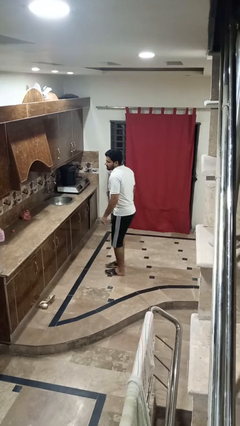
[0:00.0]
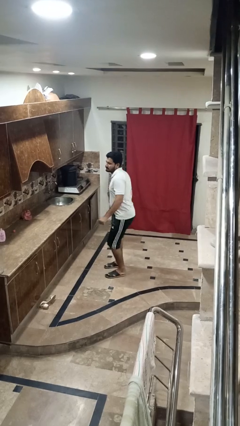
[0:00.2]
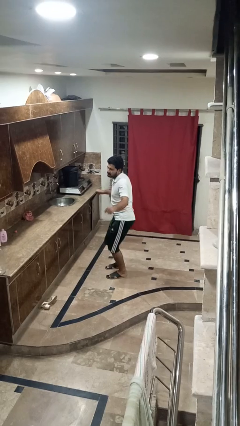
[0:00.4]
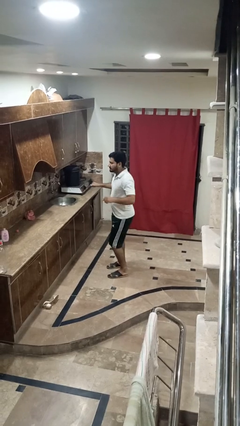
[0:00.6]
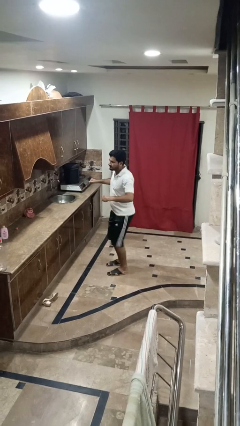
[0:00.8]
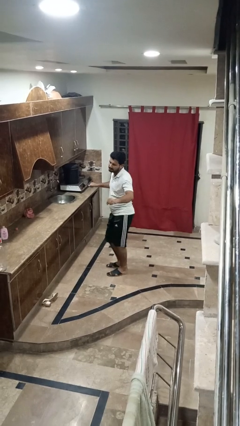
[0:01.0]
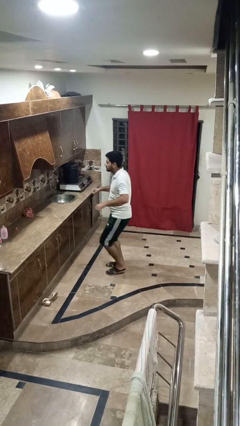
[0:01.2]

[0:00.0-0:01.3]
person wiggles hips

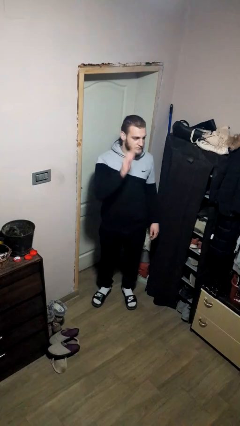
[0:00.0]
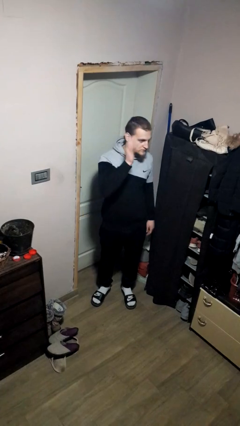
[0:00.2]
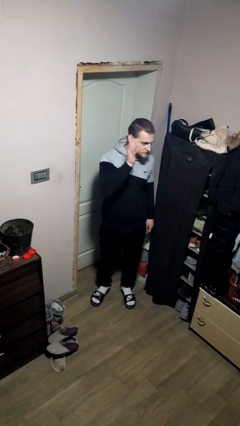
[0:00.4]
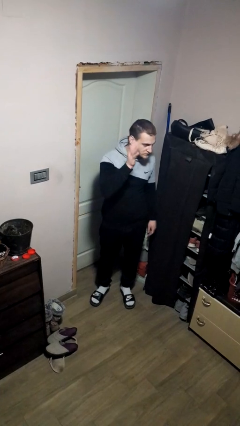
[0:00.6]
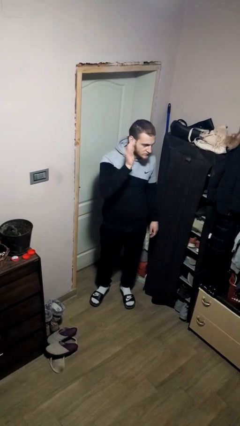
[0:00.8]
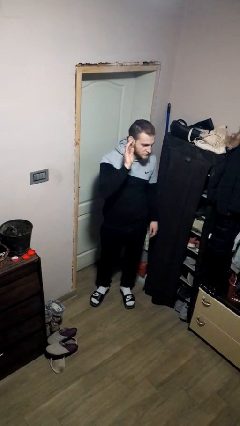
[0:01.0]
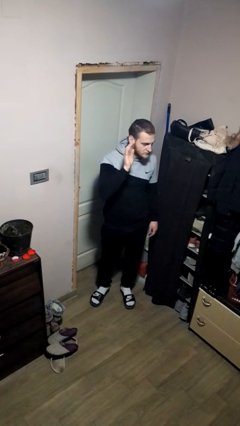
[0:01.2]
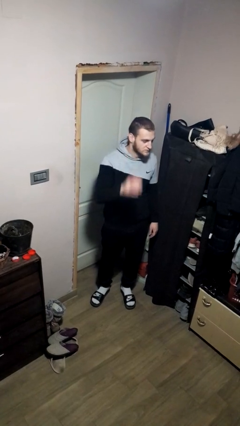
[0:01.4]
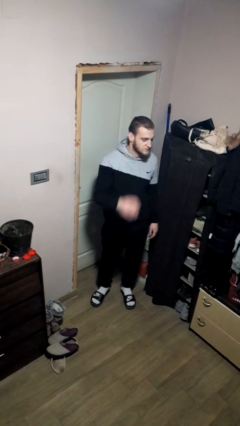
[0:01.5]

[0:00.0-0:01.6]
person waves at person

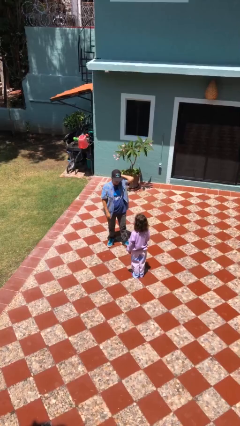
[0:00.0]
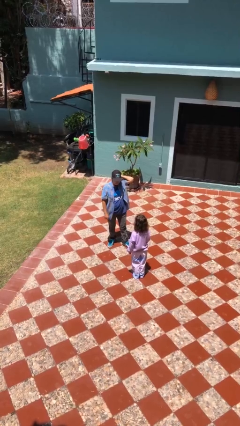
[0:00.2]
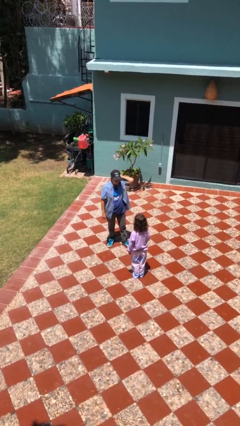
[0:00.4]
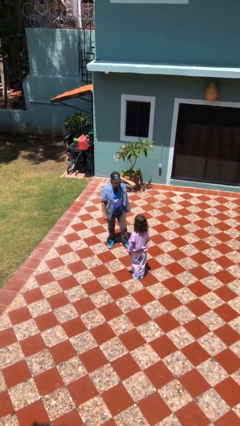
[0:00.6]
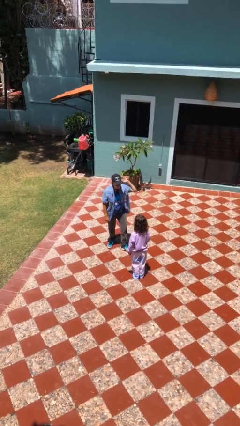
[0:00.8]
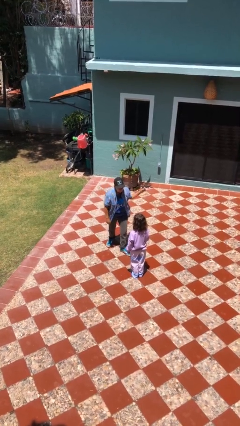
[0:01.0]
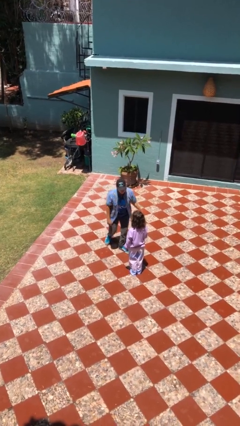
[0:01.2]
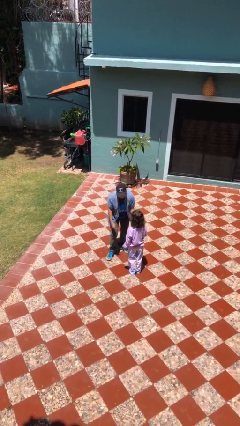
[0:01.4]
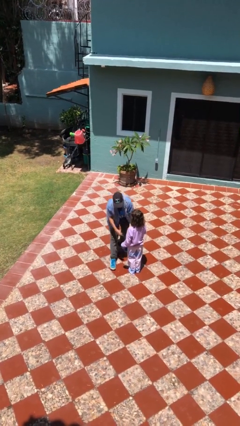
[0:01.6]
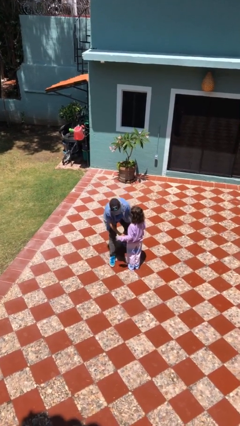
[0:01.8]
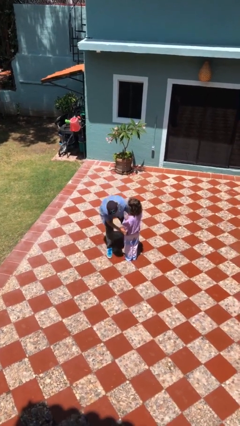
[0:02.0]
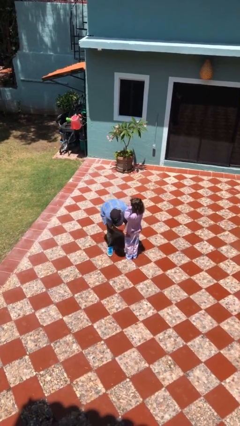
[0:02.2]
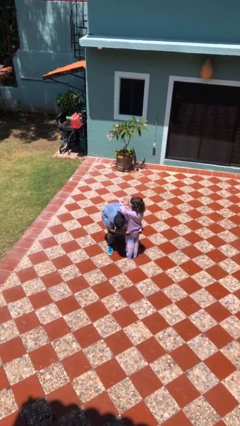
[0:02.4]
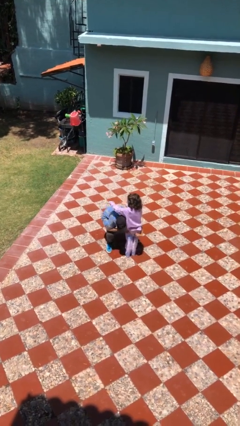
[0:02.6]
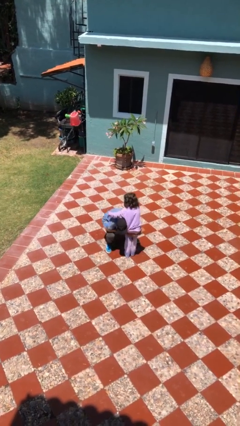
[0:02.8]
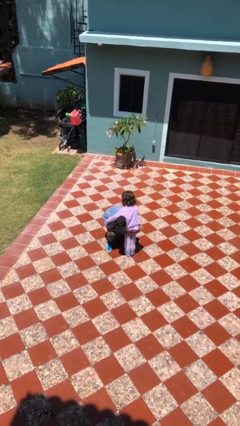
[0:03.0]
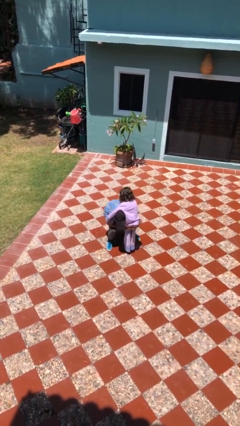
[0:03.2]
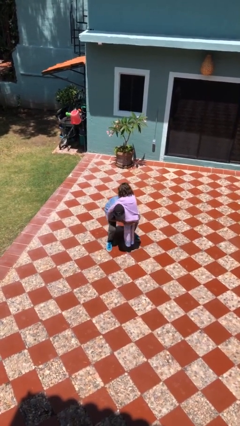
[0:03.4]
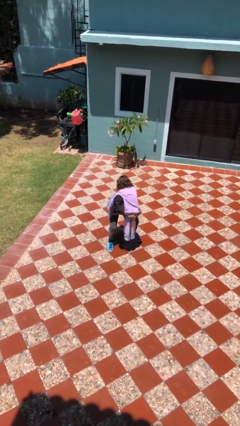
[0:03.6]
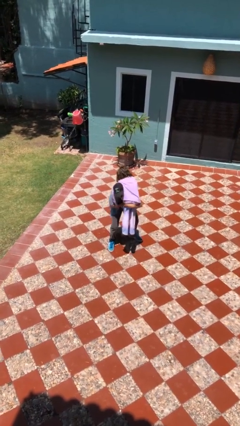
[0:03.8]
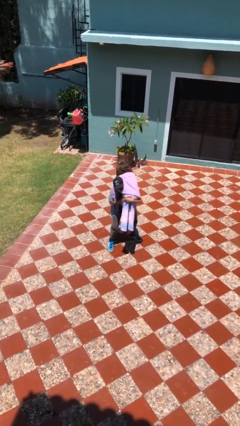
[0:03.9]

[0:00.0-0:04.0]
person carries person over shoulder

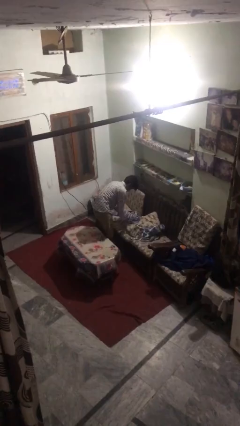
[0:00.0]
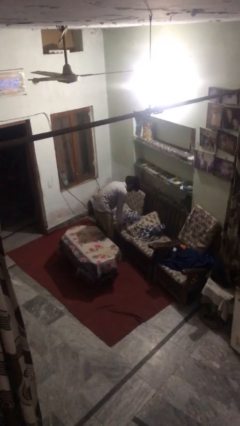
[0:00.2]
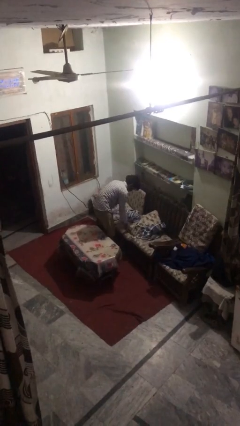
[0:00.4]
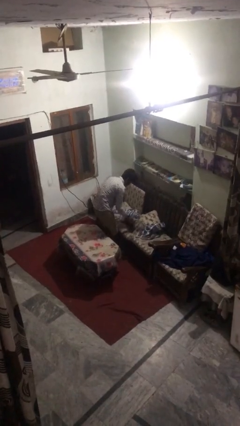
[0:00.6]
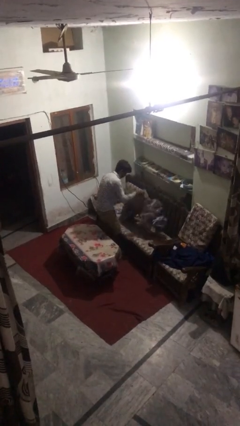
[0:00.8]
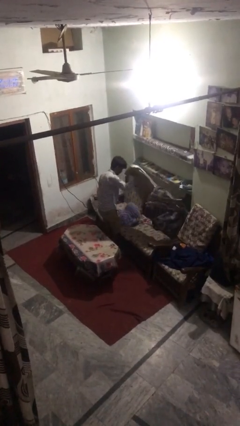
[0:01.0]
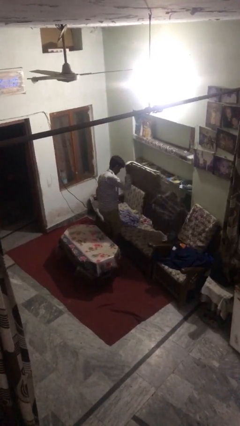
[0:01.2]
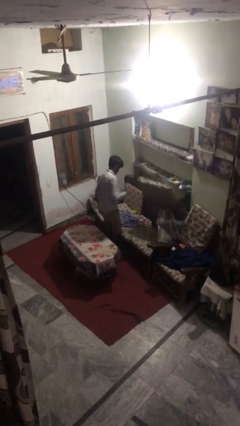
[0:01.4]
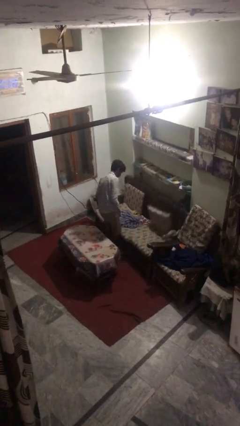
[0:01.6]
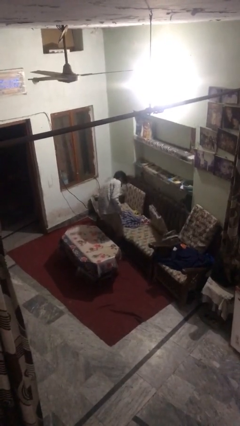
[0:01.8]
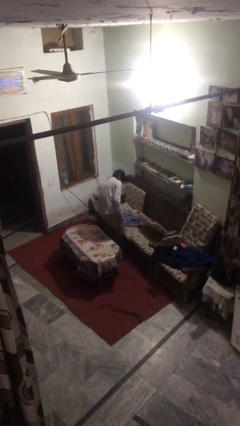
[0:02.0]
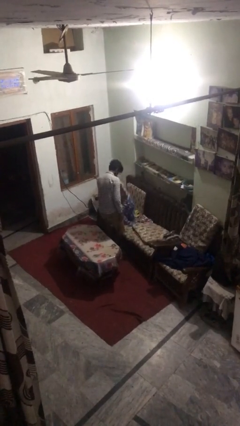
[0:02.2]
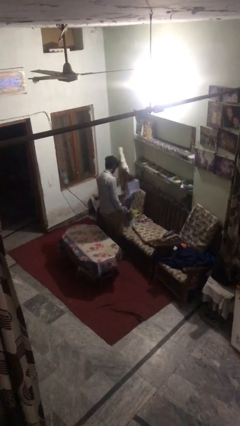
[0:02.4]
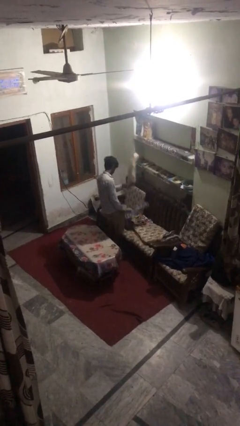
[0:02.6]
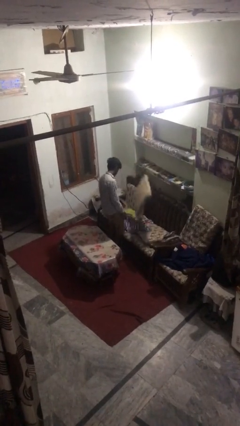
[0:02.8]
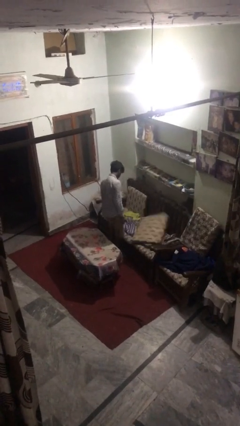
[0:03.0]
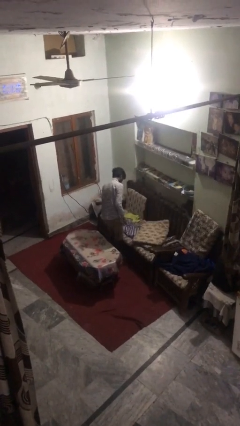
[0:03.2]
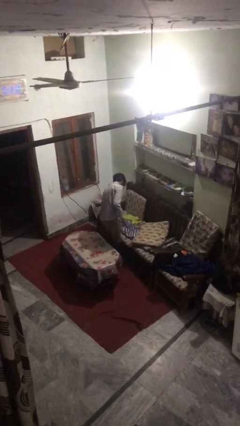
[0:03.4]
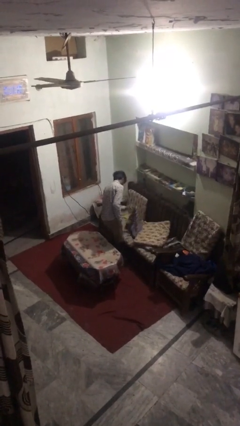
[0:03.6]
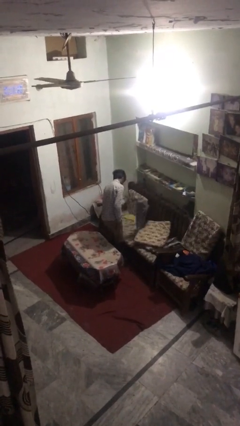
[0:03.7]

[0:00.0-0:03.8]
person searches in couch

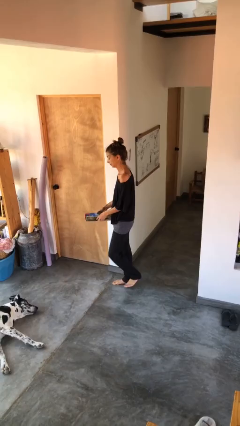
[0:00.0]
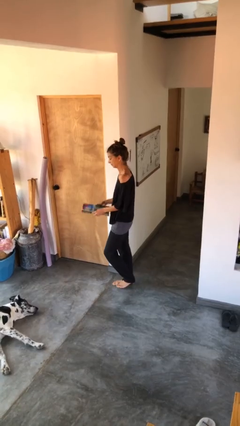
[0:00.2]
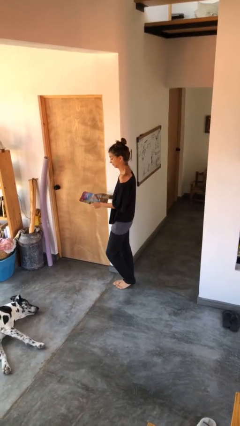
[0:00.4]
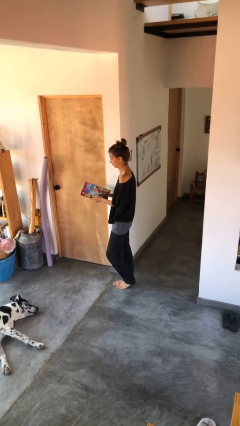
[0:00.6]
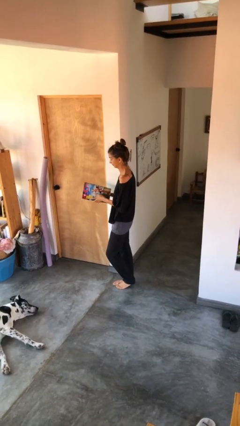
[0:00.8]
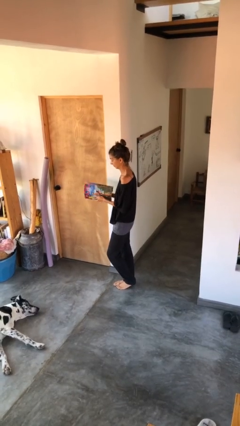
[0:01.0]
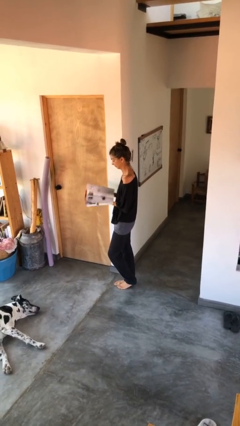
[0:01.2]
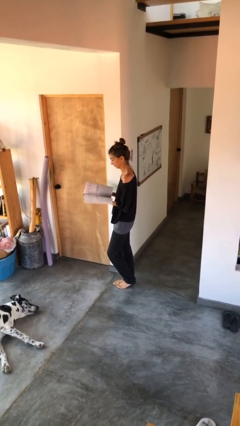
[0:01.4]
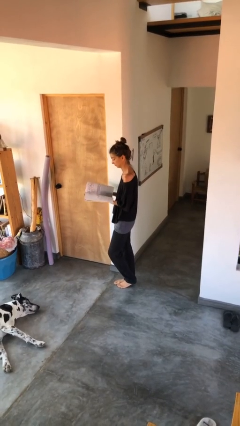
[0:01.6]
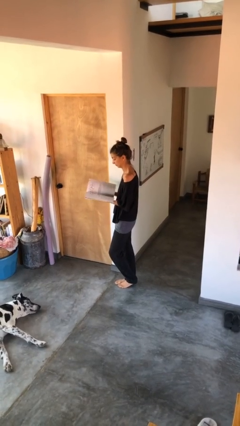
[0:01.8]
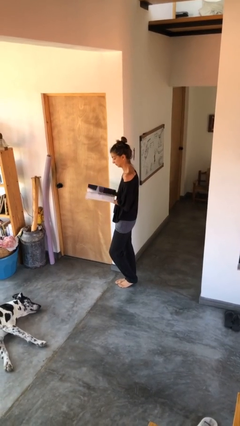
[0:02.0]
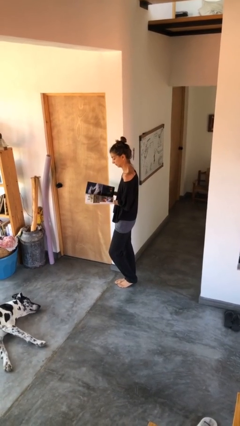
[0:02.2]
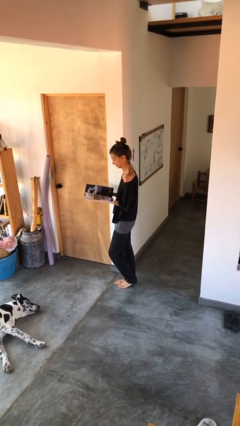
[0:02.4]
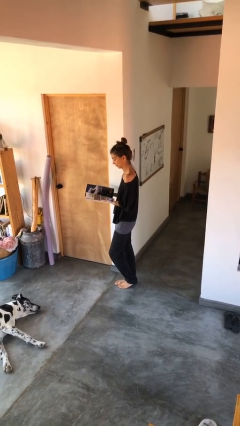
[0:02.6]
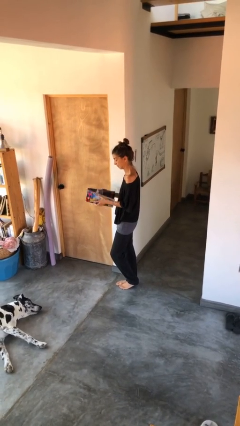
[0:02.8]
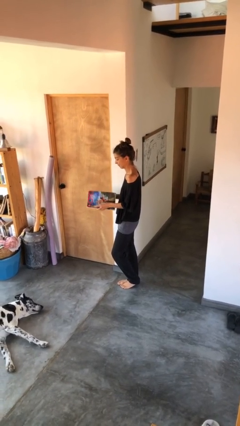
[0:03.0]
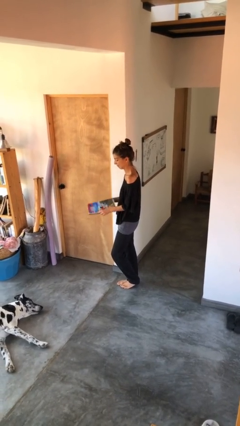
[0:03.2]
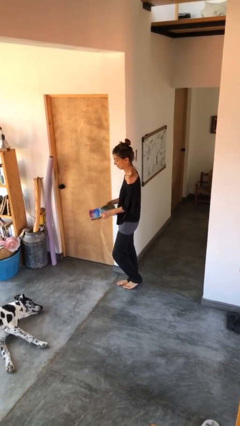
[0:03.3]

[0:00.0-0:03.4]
person reads magazine

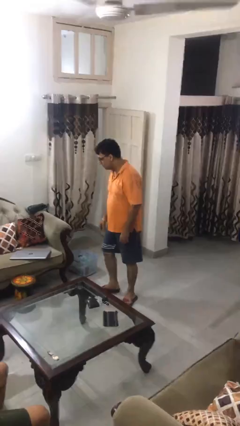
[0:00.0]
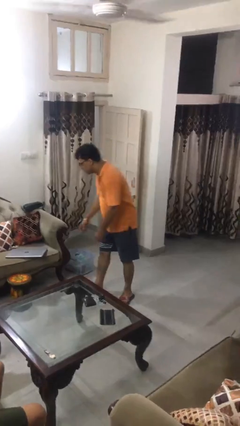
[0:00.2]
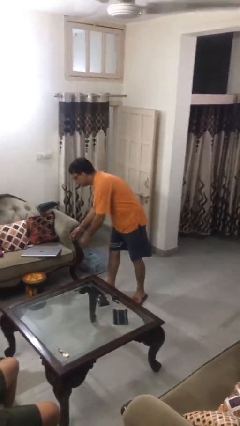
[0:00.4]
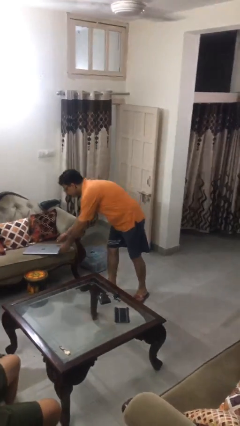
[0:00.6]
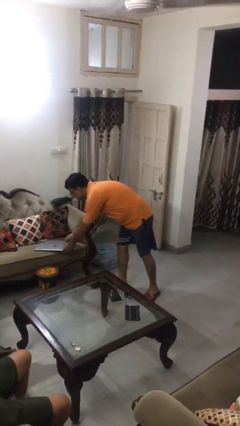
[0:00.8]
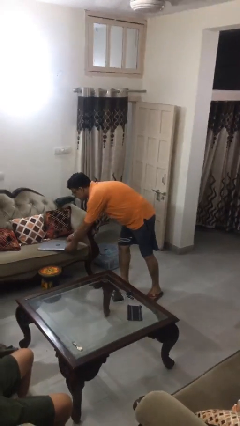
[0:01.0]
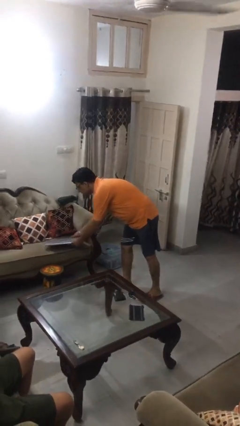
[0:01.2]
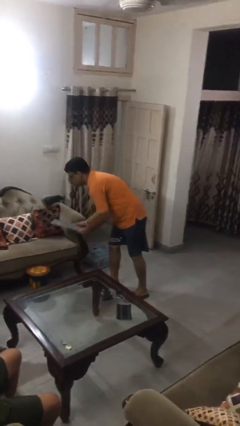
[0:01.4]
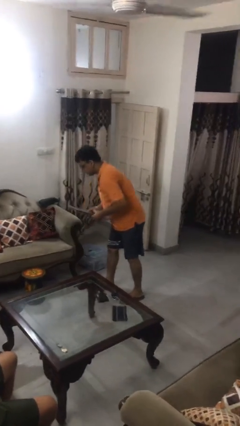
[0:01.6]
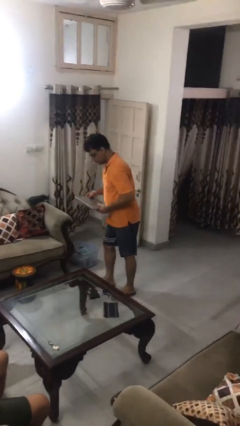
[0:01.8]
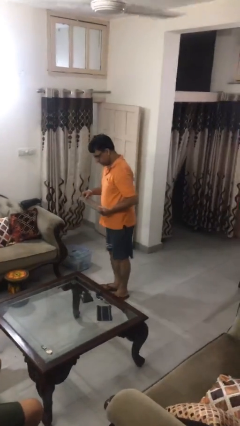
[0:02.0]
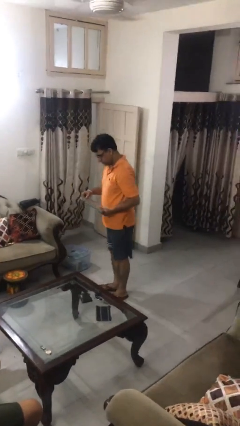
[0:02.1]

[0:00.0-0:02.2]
person picks up object from couch

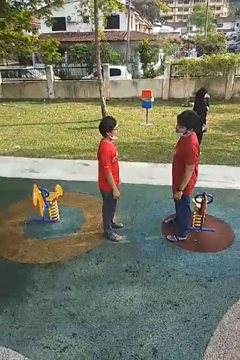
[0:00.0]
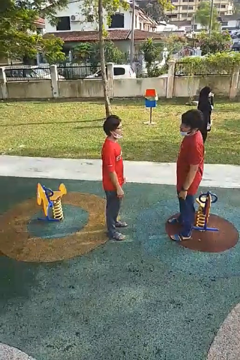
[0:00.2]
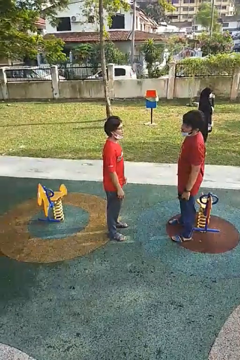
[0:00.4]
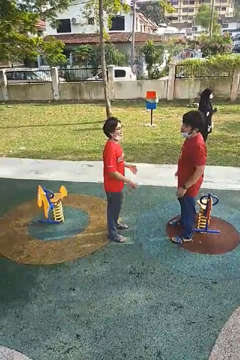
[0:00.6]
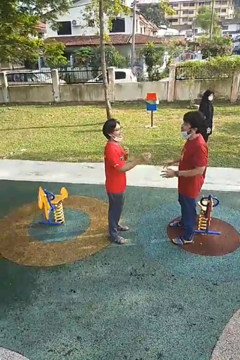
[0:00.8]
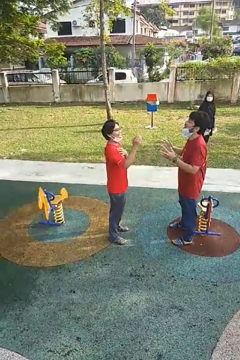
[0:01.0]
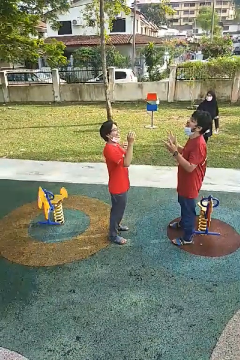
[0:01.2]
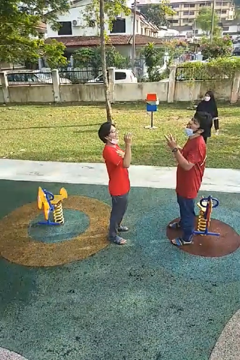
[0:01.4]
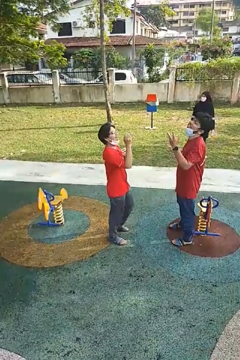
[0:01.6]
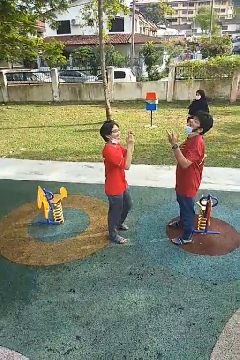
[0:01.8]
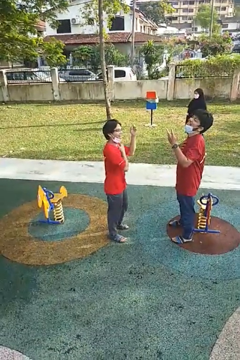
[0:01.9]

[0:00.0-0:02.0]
person laughs with person
